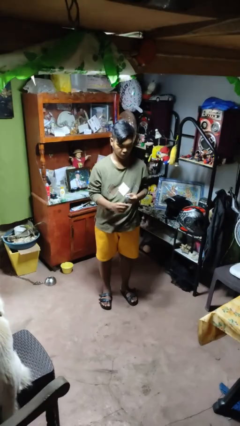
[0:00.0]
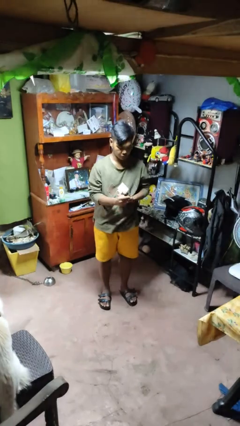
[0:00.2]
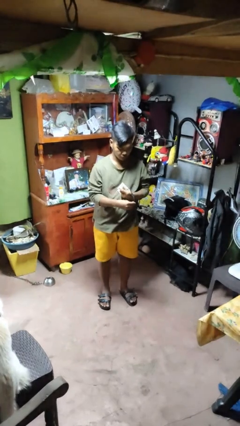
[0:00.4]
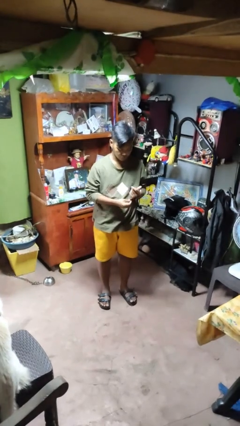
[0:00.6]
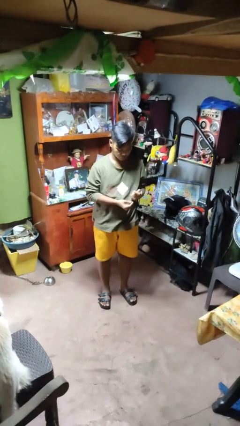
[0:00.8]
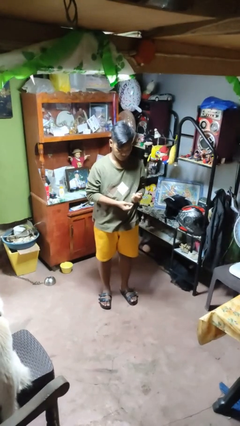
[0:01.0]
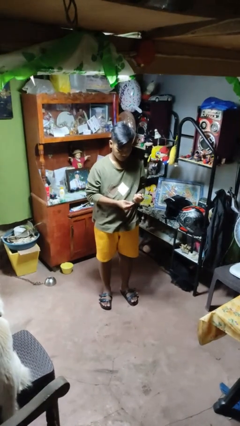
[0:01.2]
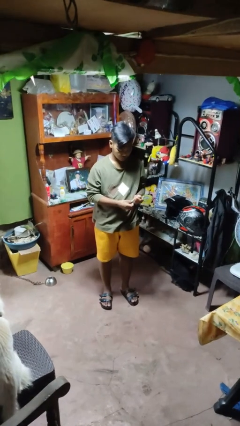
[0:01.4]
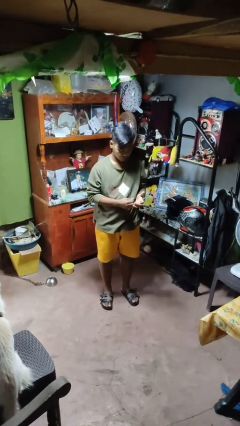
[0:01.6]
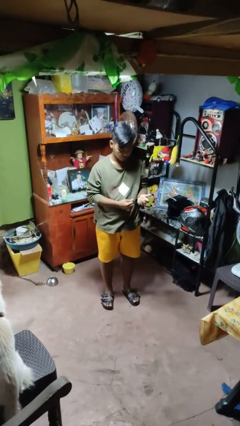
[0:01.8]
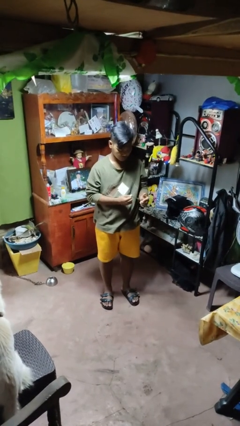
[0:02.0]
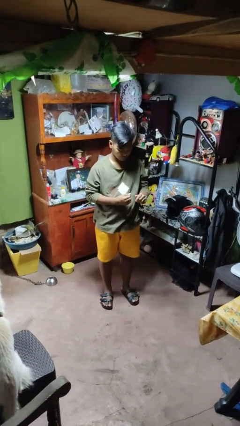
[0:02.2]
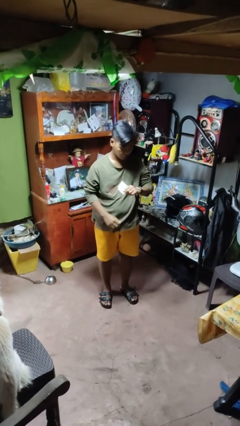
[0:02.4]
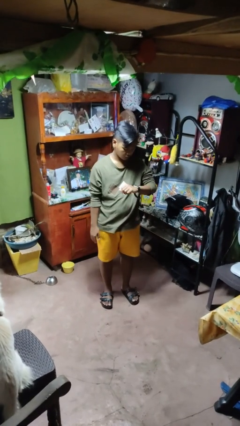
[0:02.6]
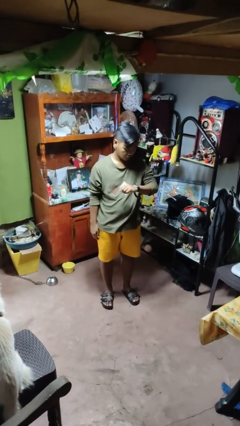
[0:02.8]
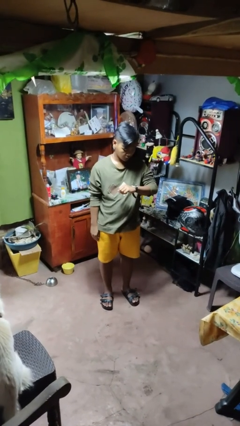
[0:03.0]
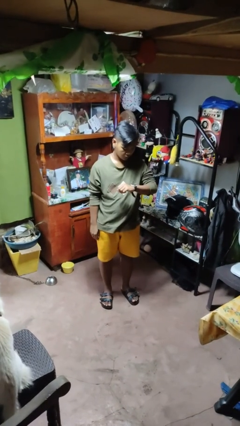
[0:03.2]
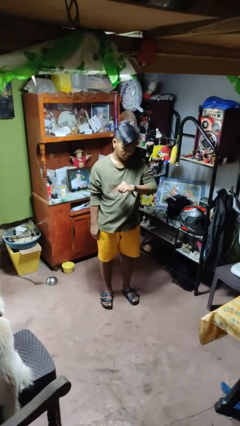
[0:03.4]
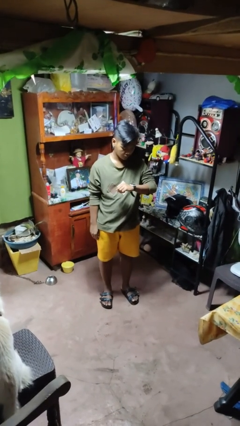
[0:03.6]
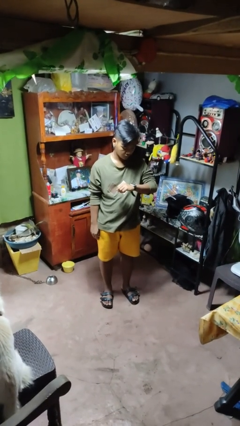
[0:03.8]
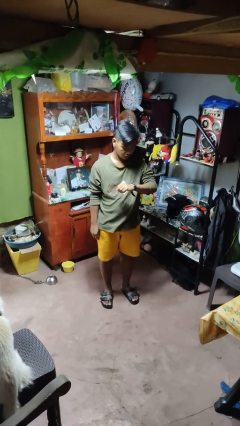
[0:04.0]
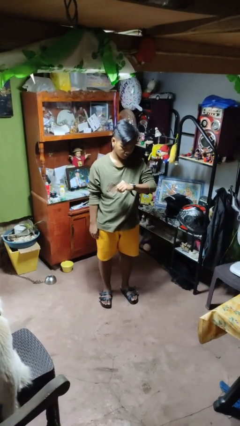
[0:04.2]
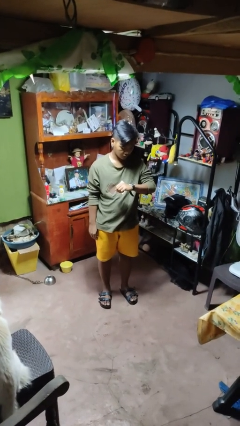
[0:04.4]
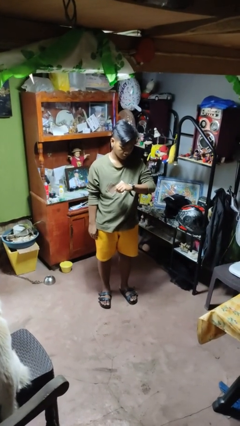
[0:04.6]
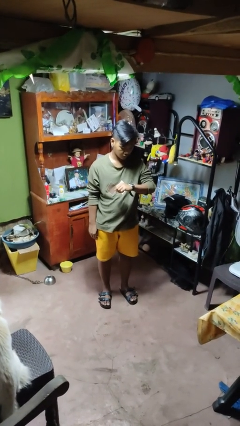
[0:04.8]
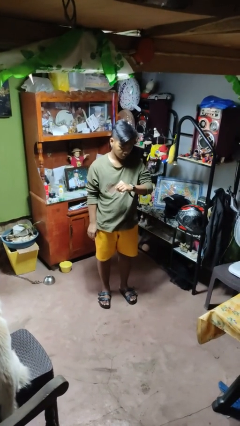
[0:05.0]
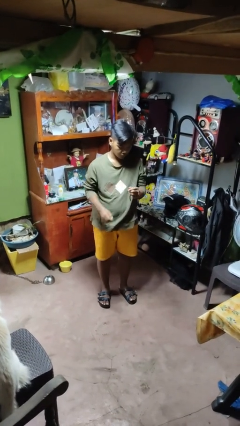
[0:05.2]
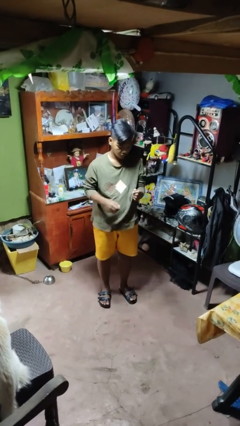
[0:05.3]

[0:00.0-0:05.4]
person puts on wristwatch

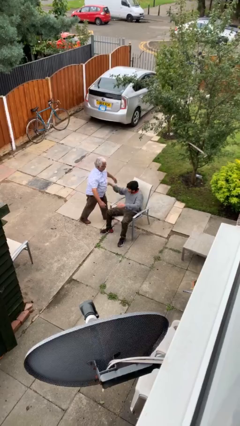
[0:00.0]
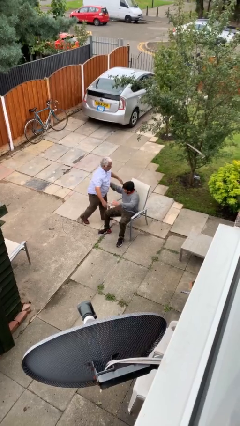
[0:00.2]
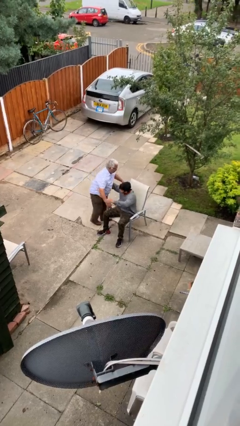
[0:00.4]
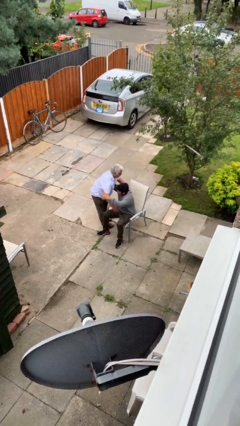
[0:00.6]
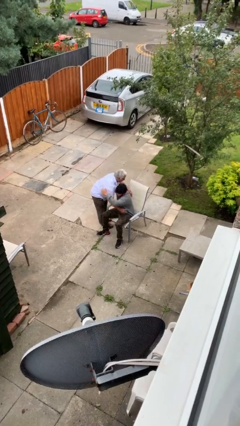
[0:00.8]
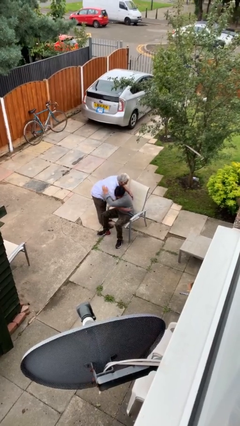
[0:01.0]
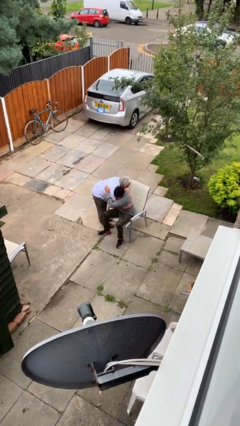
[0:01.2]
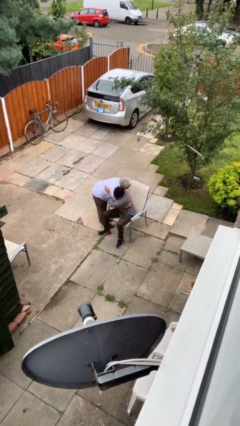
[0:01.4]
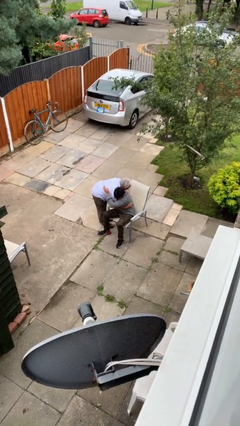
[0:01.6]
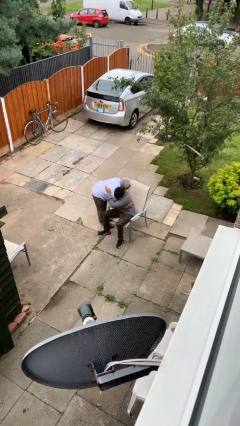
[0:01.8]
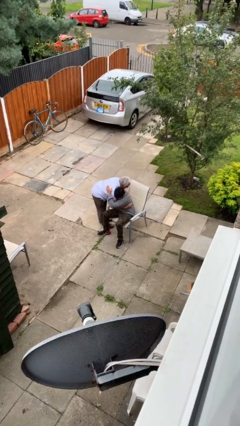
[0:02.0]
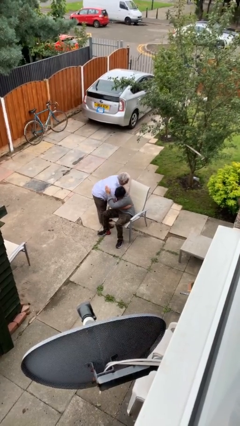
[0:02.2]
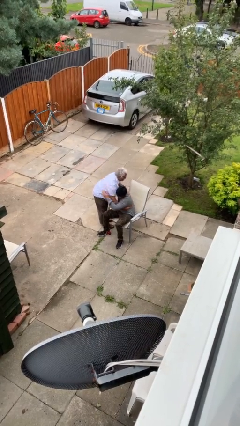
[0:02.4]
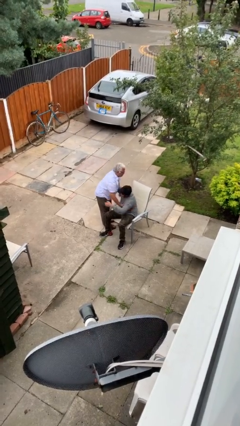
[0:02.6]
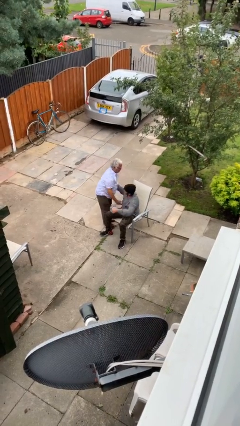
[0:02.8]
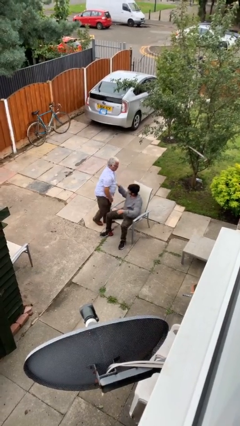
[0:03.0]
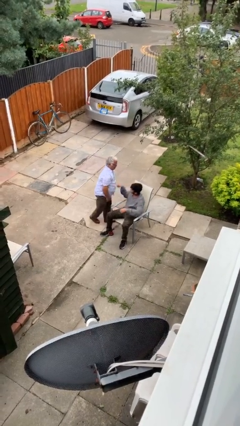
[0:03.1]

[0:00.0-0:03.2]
person embraces person

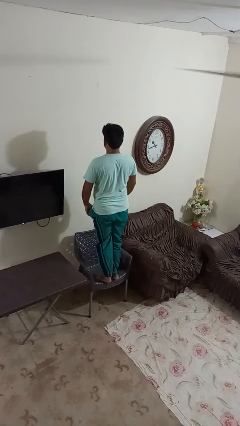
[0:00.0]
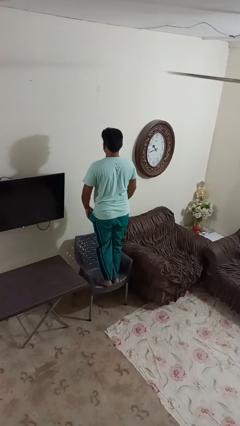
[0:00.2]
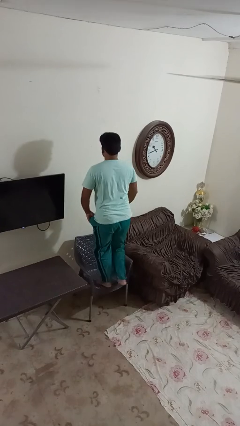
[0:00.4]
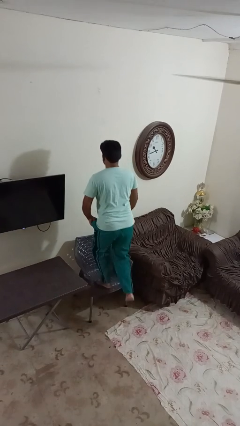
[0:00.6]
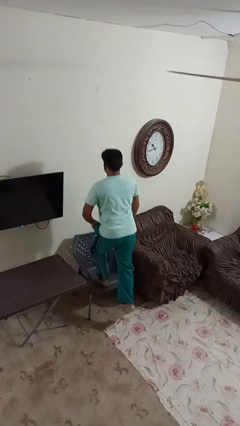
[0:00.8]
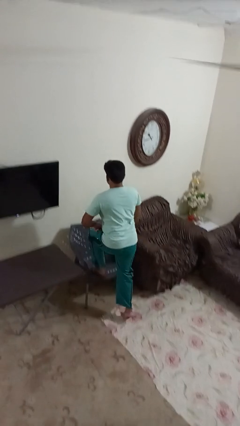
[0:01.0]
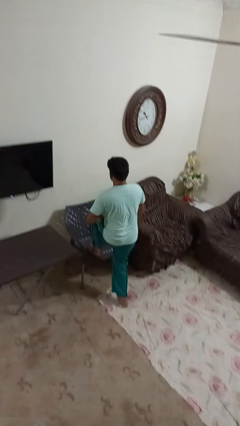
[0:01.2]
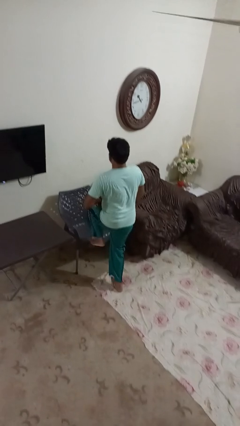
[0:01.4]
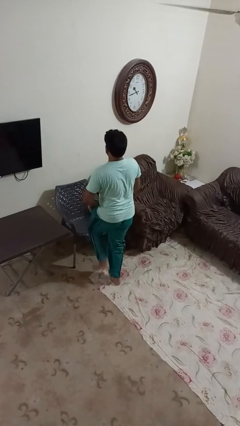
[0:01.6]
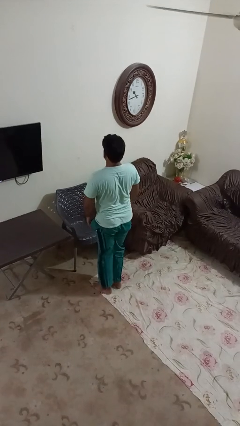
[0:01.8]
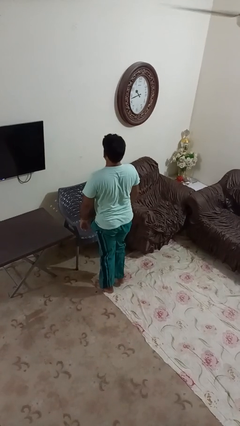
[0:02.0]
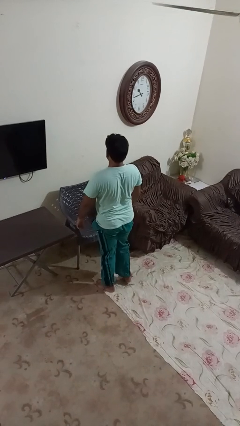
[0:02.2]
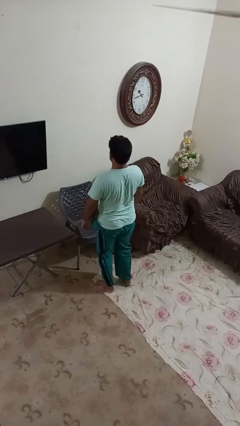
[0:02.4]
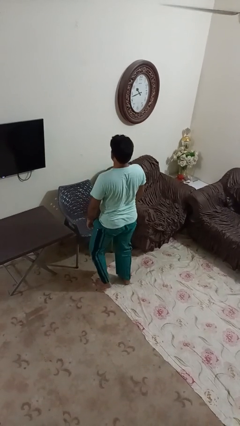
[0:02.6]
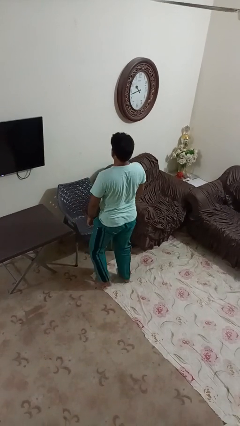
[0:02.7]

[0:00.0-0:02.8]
person climbs off chair

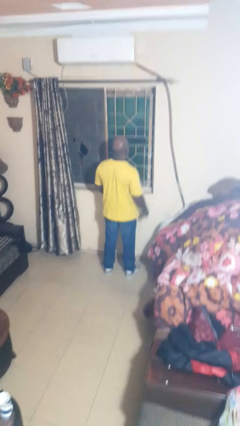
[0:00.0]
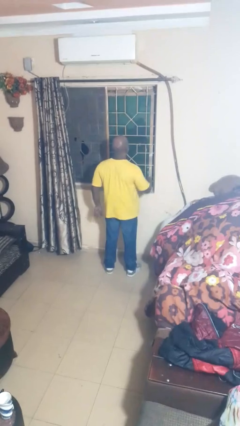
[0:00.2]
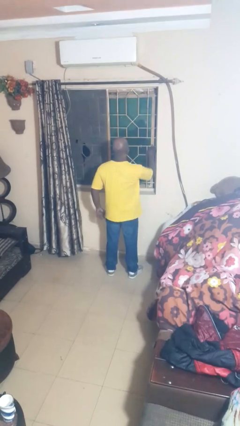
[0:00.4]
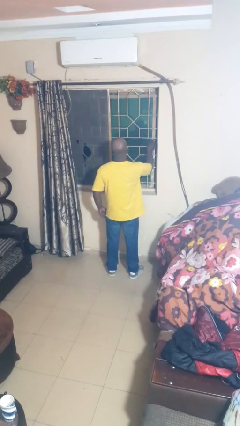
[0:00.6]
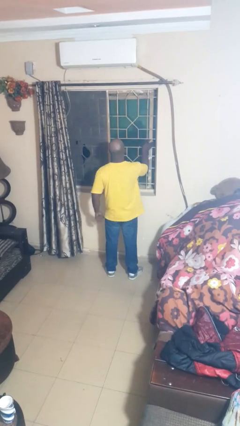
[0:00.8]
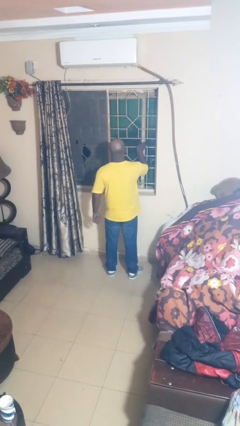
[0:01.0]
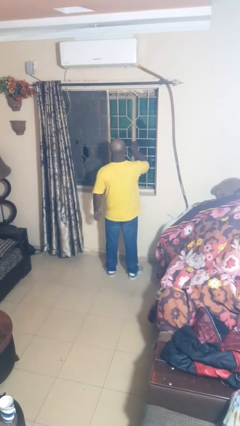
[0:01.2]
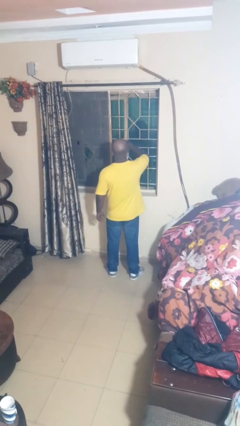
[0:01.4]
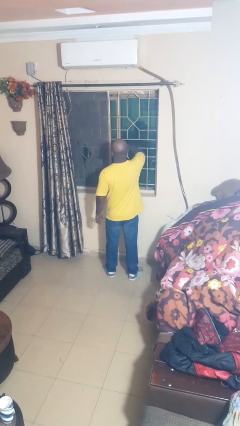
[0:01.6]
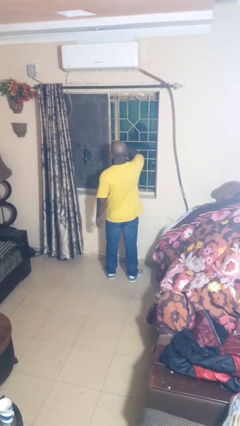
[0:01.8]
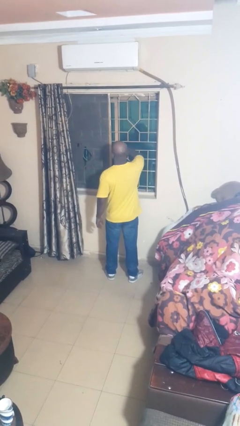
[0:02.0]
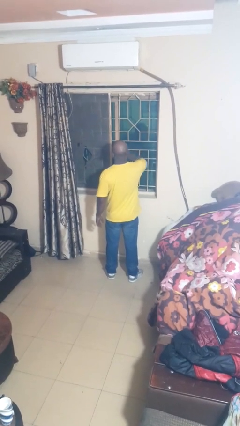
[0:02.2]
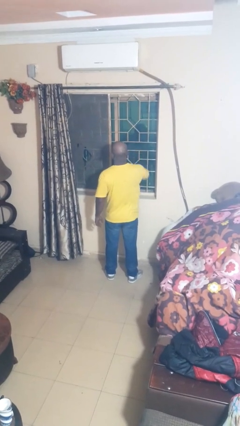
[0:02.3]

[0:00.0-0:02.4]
person opens home window

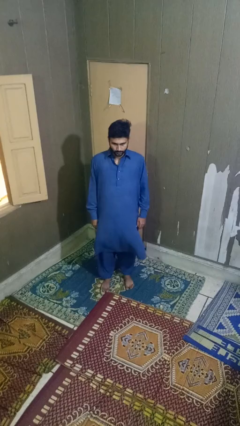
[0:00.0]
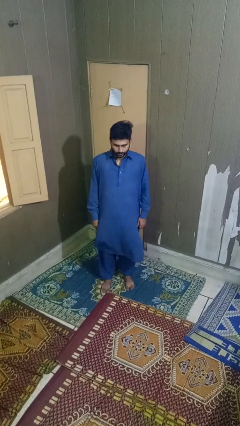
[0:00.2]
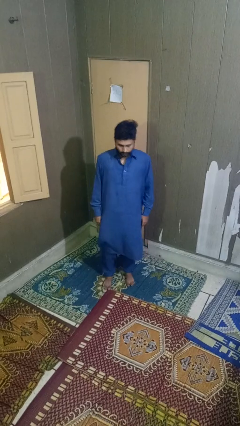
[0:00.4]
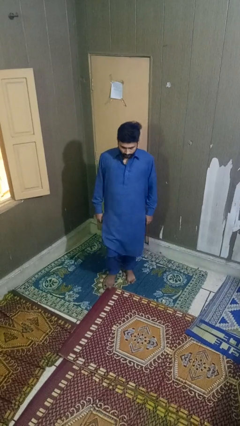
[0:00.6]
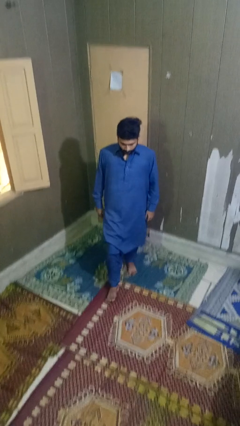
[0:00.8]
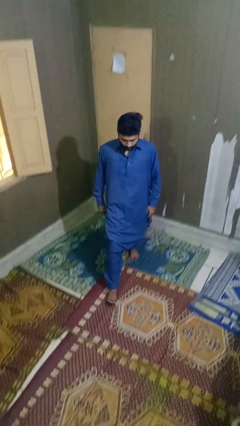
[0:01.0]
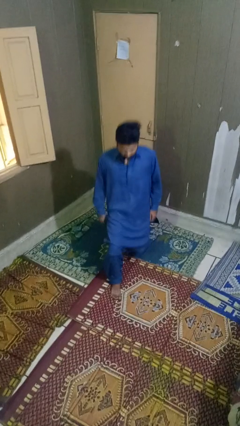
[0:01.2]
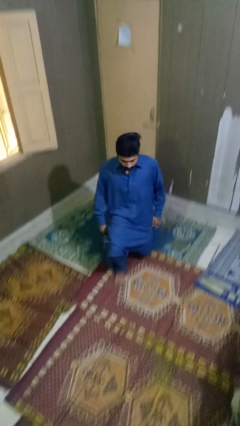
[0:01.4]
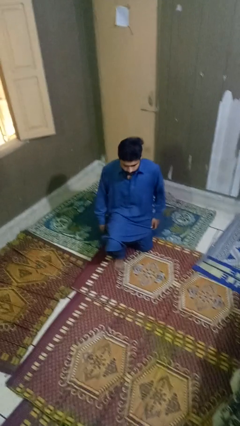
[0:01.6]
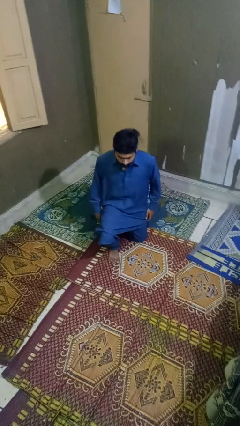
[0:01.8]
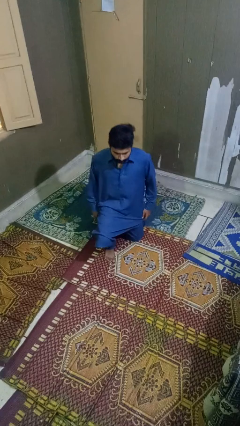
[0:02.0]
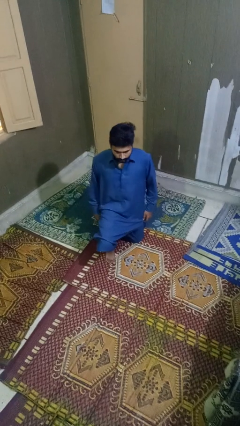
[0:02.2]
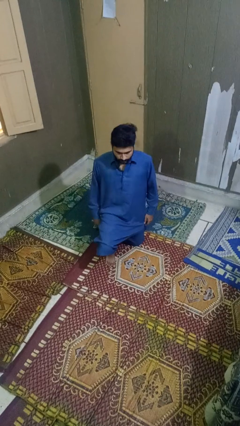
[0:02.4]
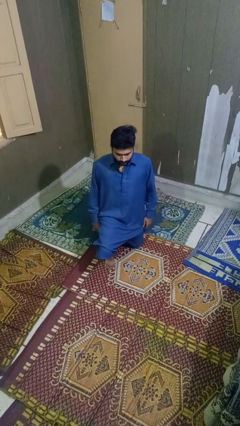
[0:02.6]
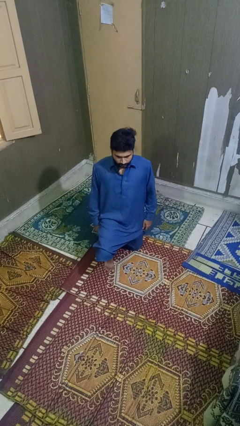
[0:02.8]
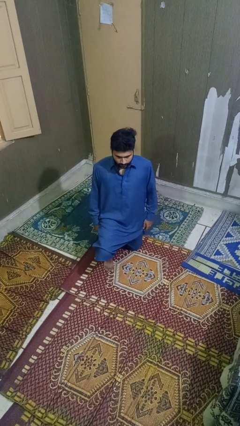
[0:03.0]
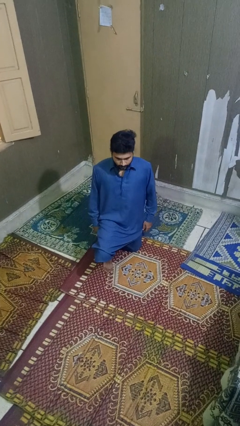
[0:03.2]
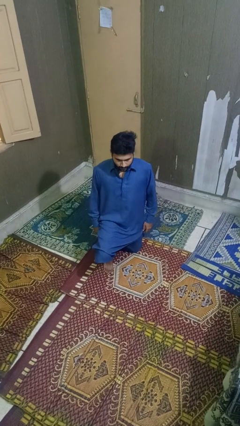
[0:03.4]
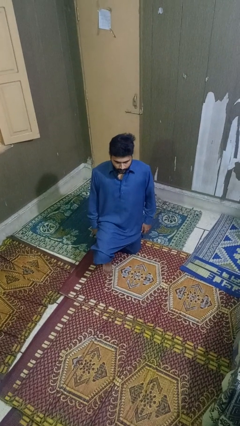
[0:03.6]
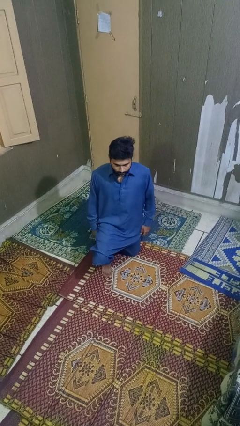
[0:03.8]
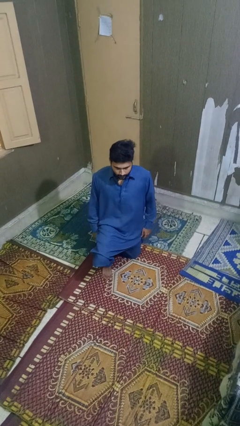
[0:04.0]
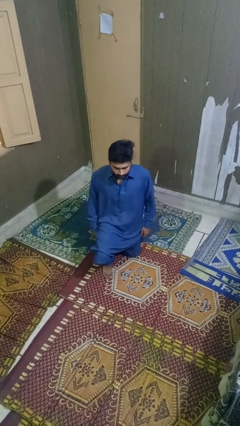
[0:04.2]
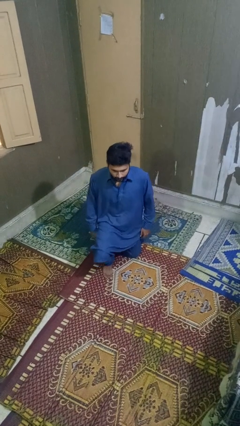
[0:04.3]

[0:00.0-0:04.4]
person exercises with lunges
